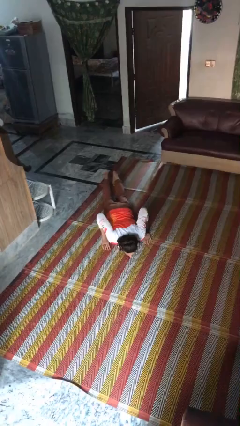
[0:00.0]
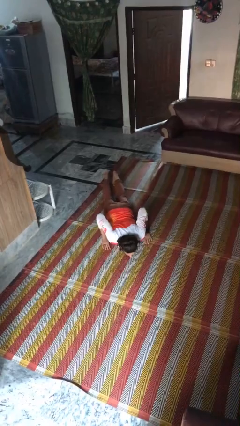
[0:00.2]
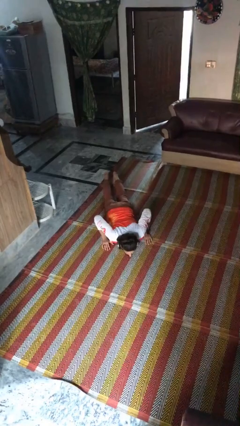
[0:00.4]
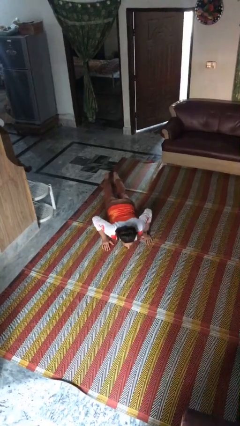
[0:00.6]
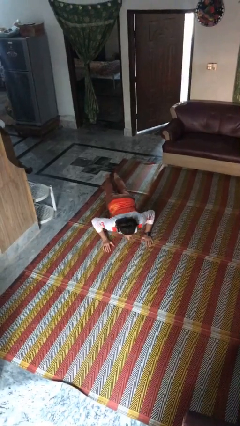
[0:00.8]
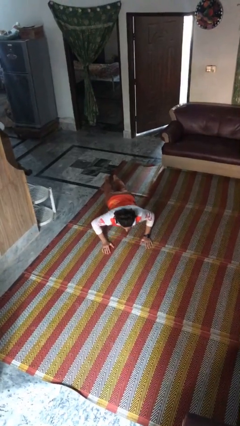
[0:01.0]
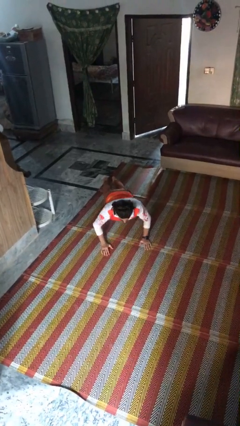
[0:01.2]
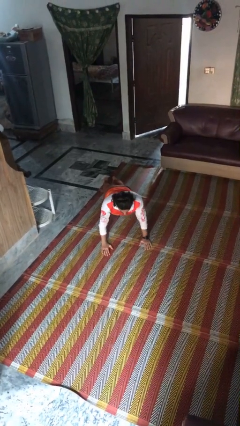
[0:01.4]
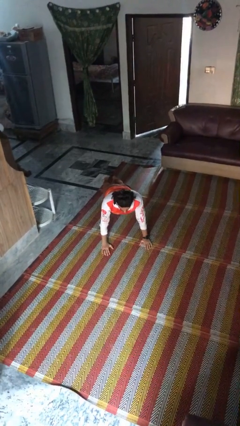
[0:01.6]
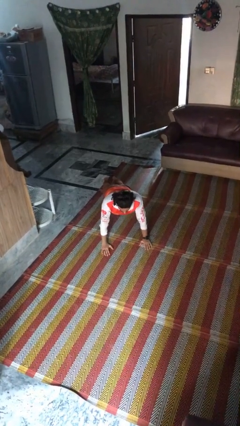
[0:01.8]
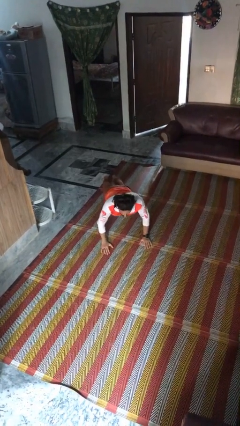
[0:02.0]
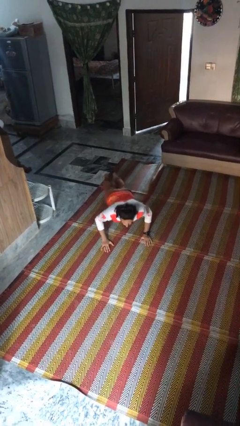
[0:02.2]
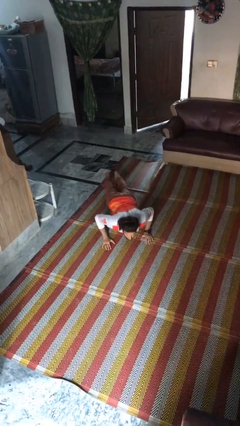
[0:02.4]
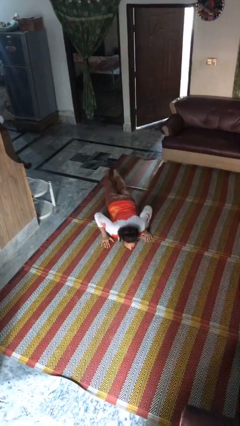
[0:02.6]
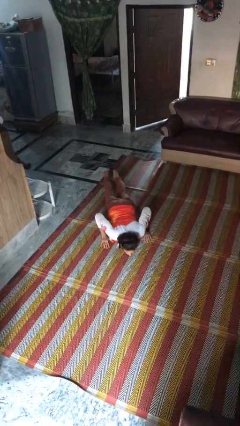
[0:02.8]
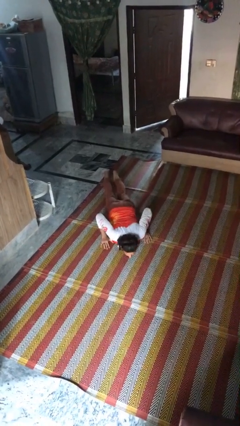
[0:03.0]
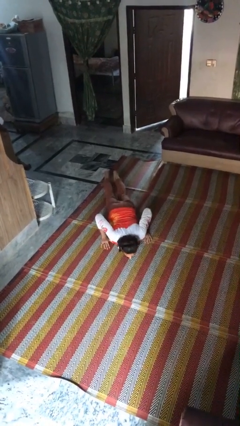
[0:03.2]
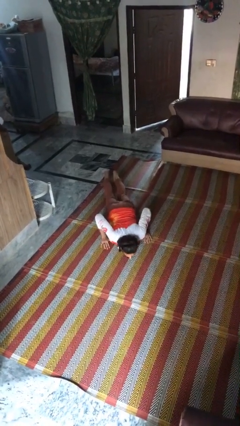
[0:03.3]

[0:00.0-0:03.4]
person exercises with pushup

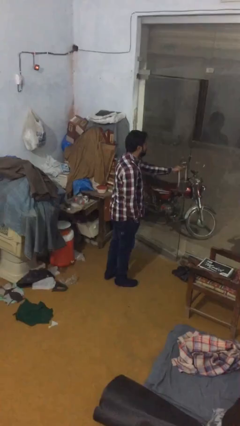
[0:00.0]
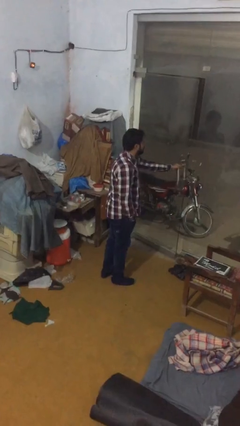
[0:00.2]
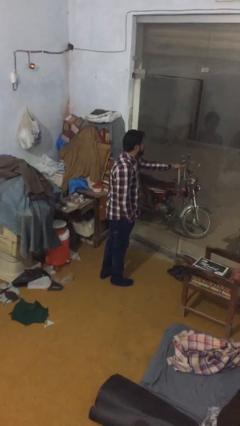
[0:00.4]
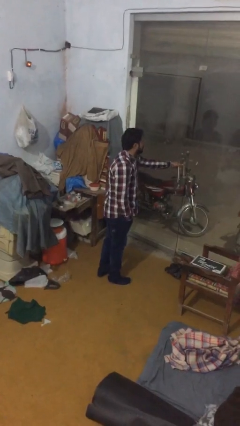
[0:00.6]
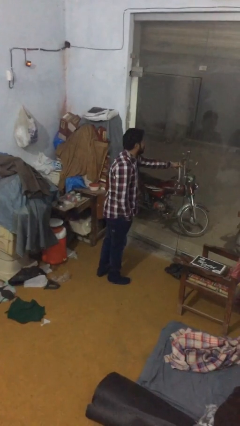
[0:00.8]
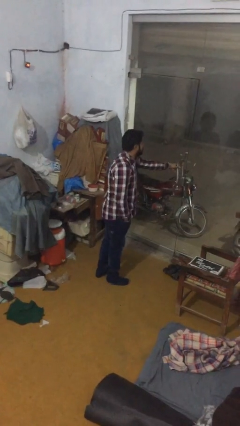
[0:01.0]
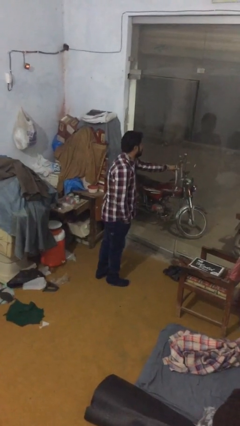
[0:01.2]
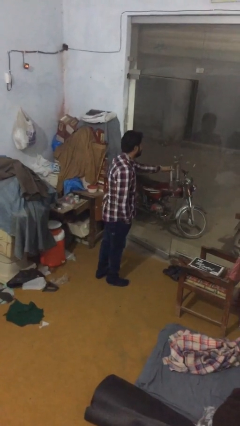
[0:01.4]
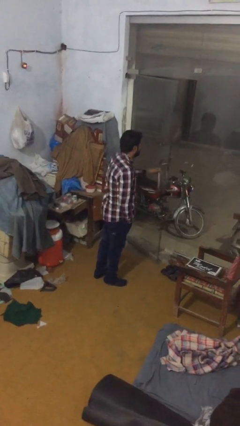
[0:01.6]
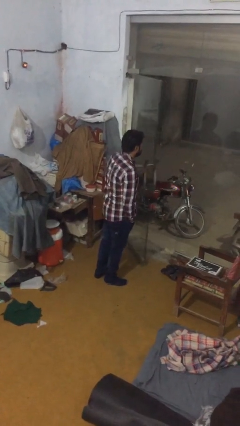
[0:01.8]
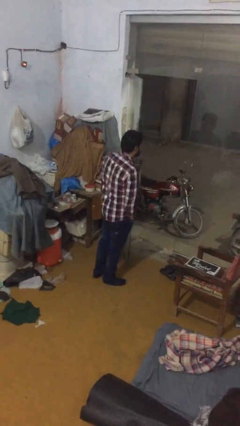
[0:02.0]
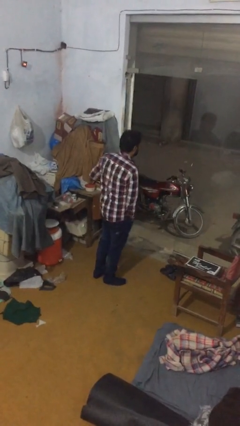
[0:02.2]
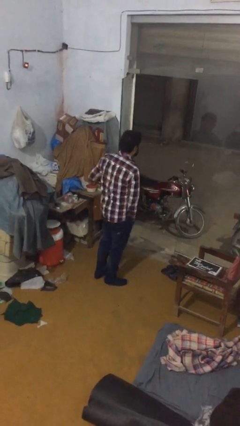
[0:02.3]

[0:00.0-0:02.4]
person opens facility door

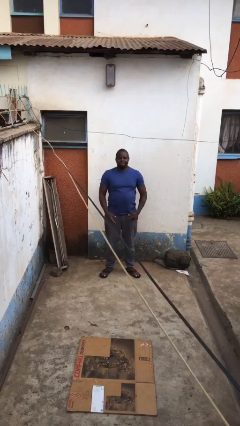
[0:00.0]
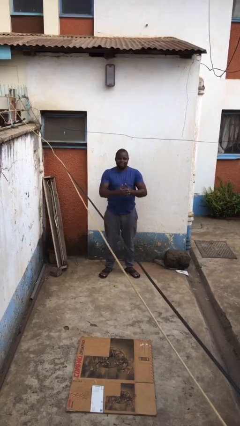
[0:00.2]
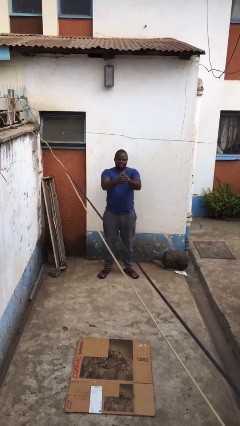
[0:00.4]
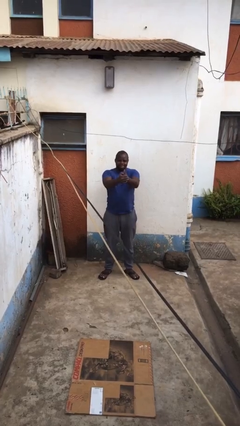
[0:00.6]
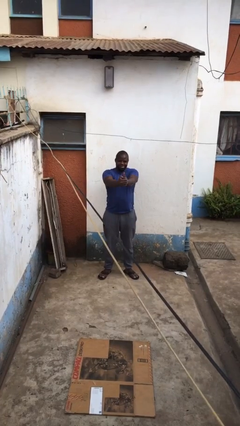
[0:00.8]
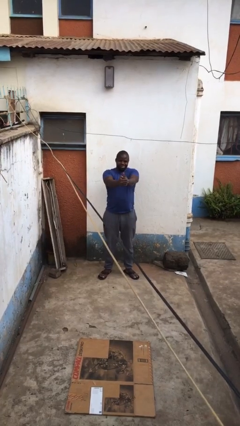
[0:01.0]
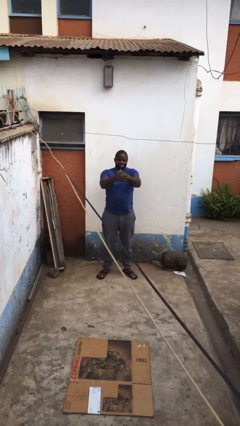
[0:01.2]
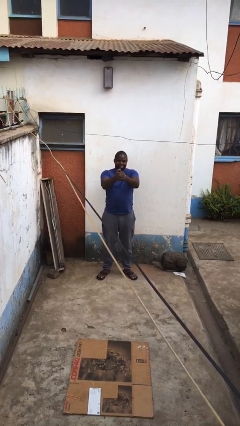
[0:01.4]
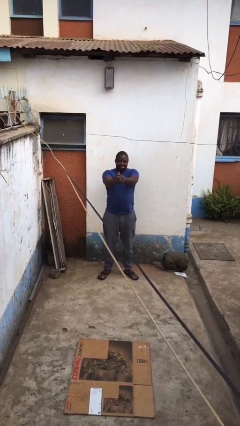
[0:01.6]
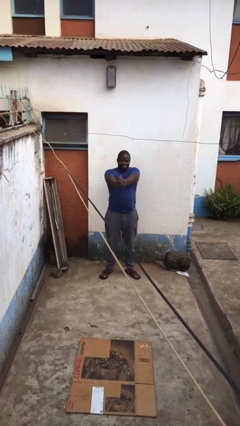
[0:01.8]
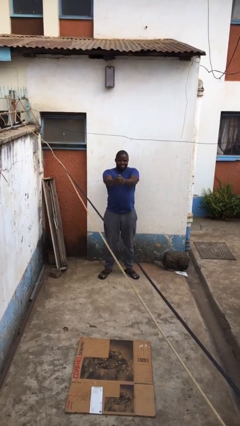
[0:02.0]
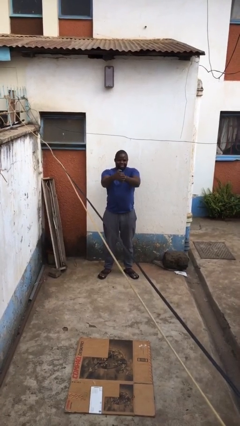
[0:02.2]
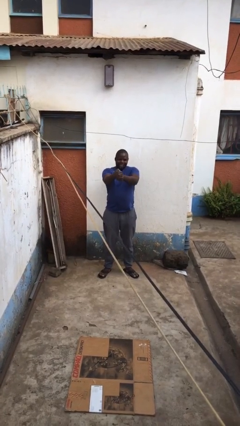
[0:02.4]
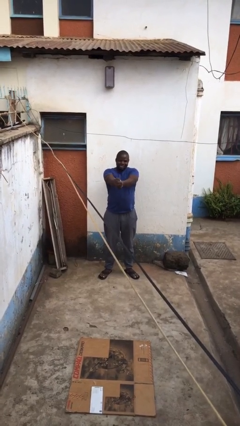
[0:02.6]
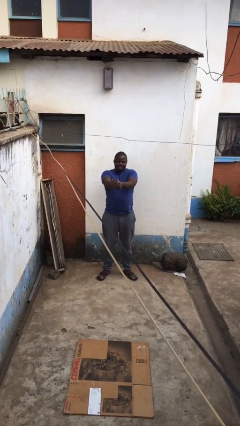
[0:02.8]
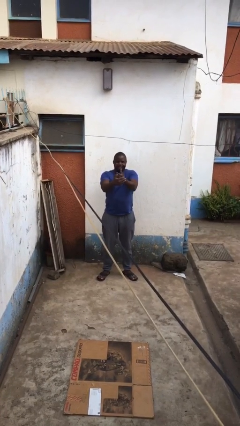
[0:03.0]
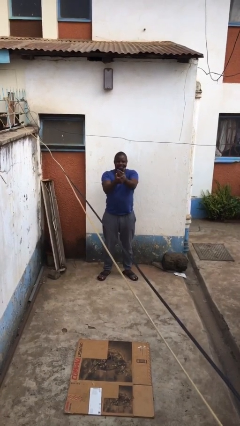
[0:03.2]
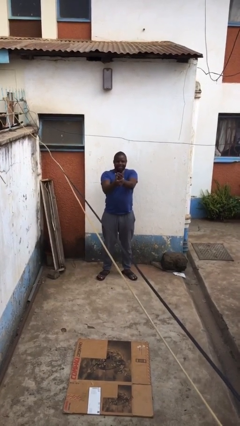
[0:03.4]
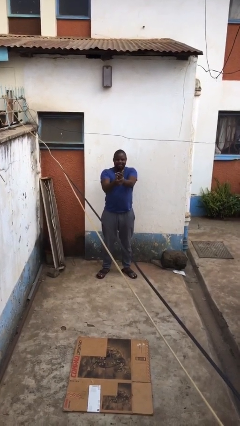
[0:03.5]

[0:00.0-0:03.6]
person cracks knuckles

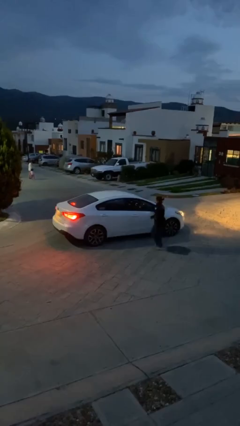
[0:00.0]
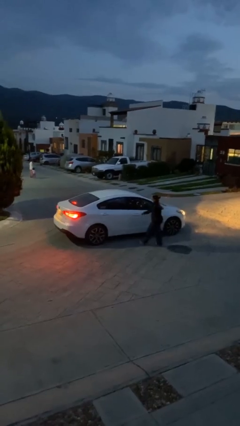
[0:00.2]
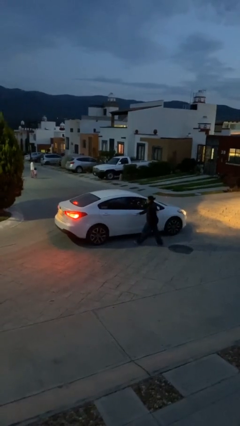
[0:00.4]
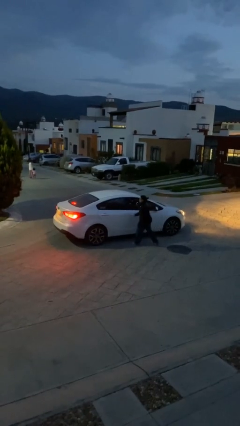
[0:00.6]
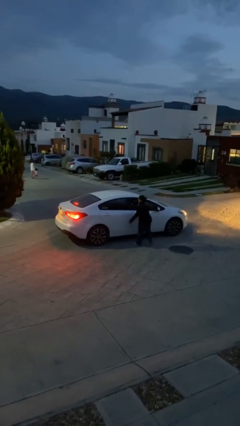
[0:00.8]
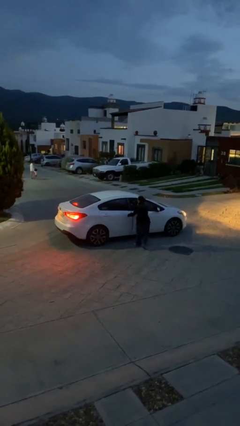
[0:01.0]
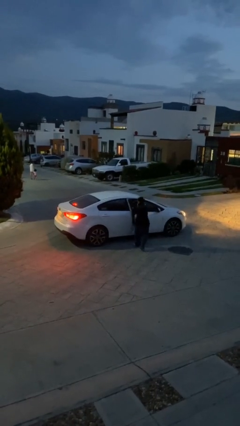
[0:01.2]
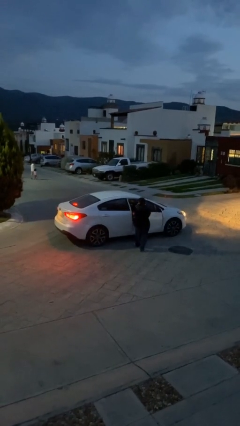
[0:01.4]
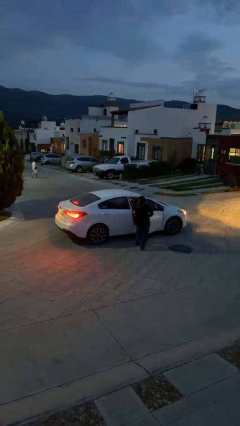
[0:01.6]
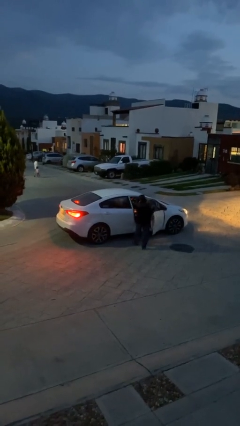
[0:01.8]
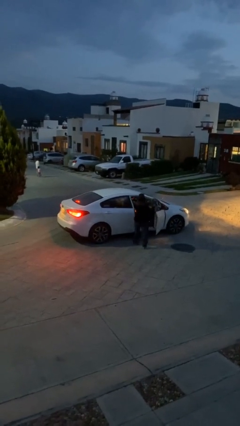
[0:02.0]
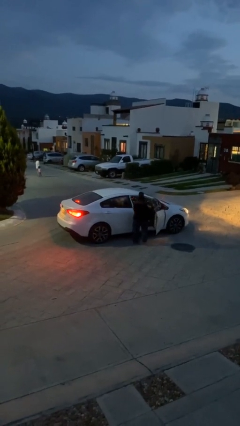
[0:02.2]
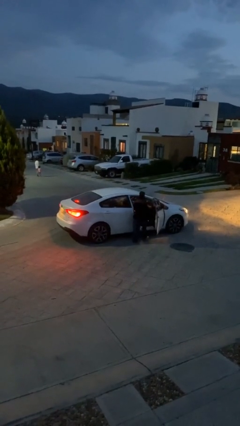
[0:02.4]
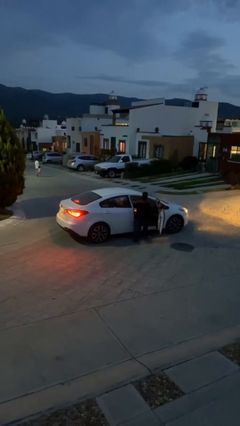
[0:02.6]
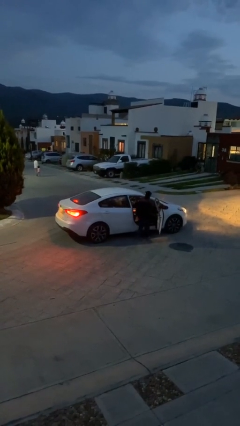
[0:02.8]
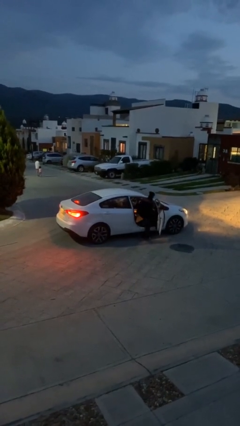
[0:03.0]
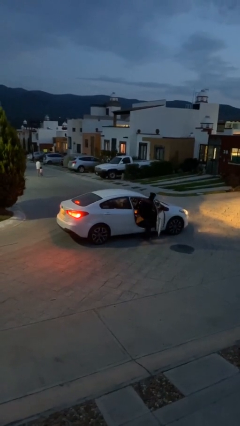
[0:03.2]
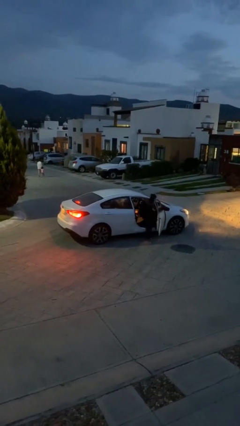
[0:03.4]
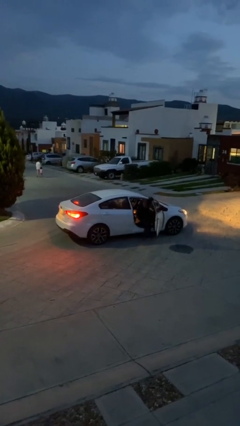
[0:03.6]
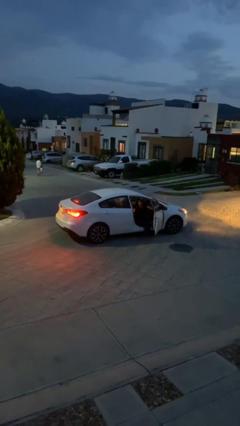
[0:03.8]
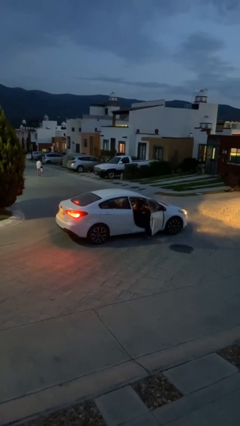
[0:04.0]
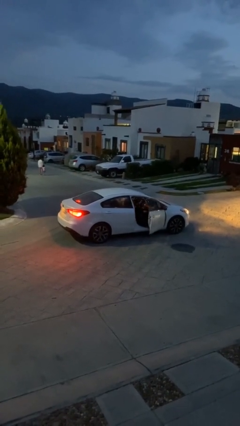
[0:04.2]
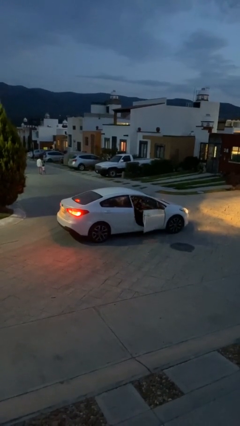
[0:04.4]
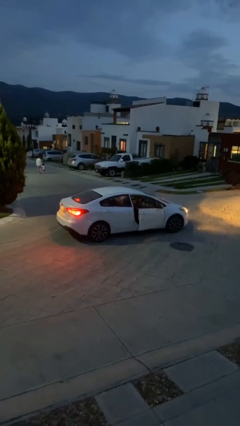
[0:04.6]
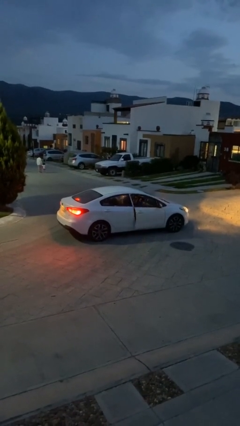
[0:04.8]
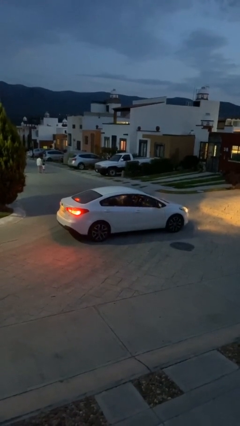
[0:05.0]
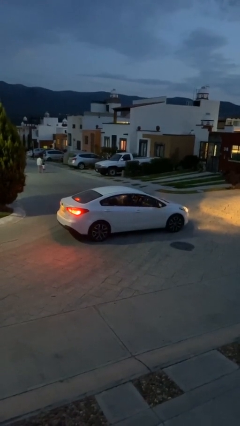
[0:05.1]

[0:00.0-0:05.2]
car picks up person

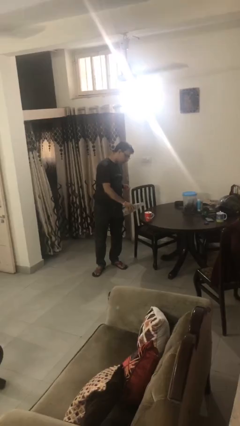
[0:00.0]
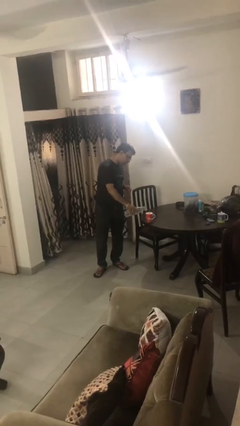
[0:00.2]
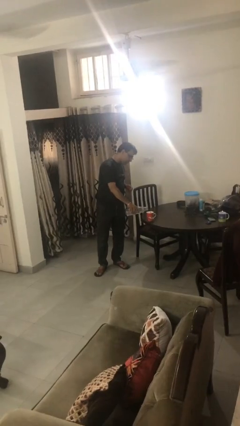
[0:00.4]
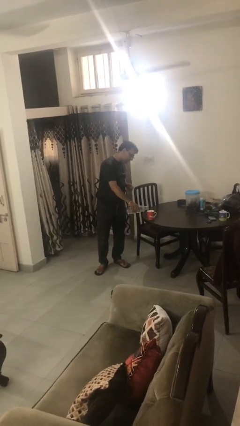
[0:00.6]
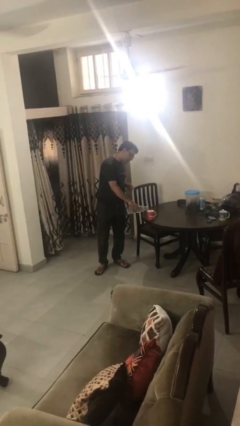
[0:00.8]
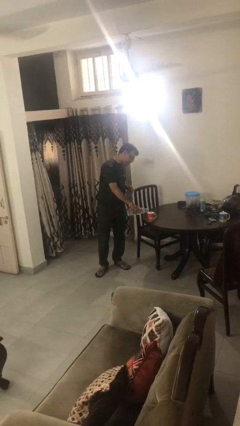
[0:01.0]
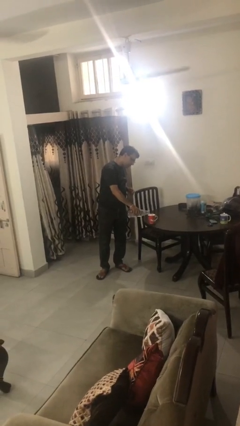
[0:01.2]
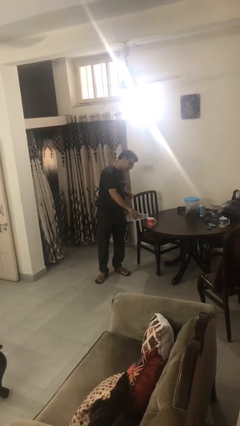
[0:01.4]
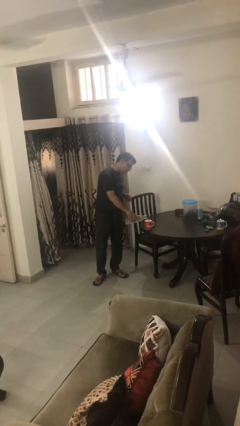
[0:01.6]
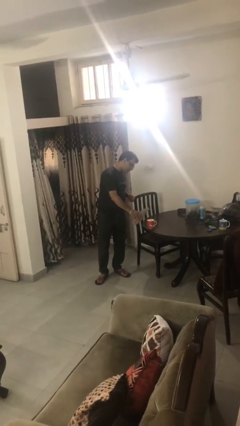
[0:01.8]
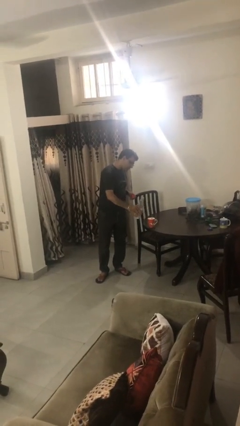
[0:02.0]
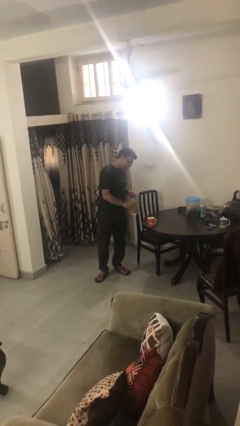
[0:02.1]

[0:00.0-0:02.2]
person pours liquid into cup

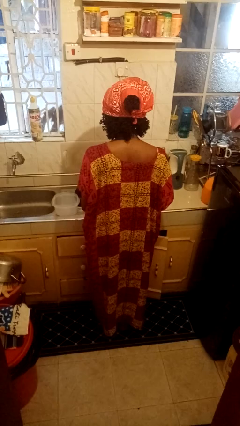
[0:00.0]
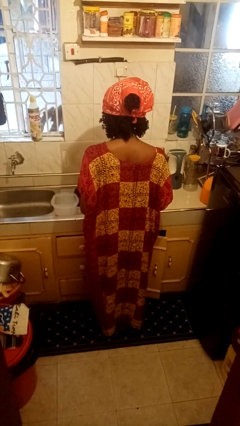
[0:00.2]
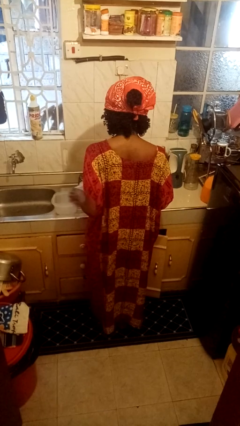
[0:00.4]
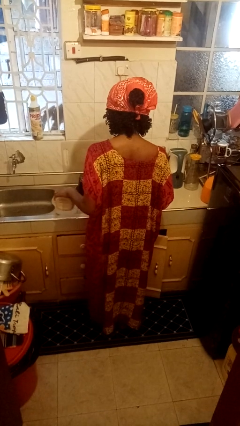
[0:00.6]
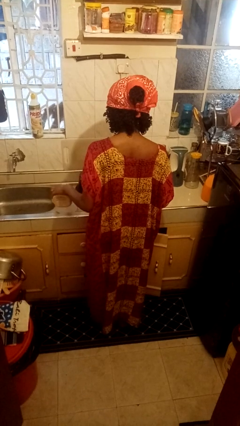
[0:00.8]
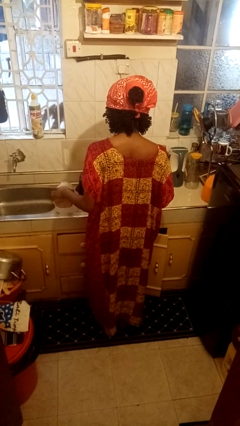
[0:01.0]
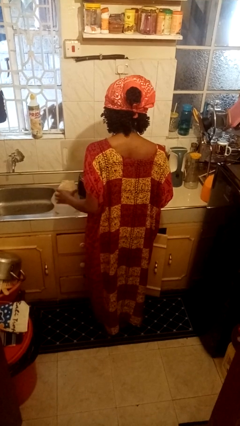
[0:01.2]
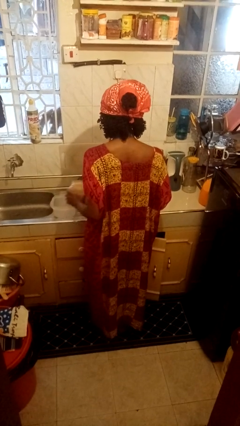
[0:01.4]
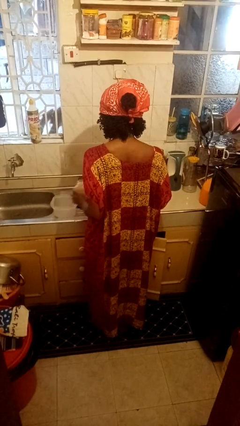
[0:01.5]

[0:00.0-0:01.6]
person pours into bowl
